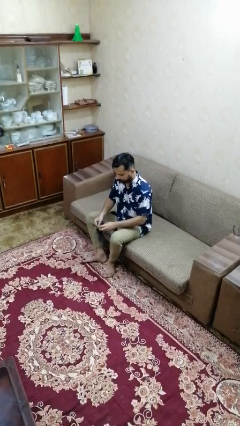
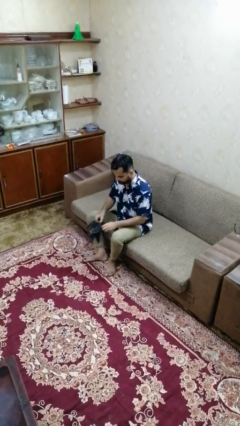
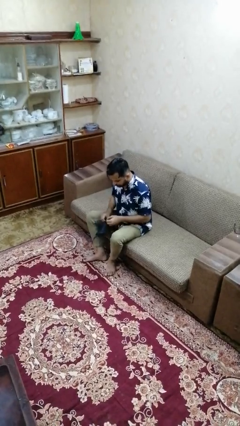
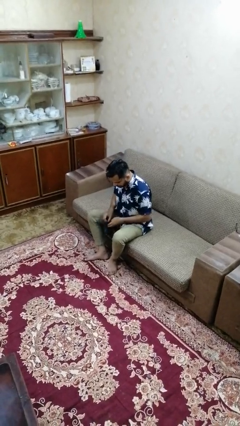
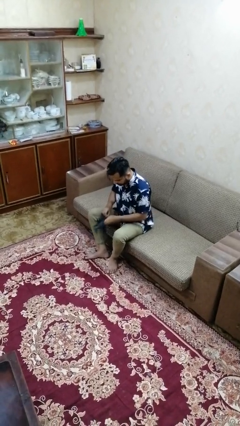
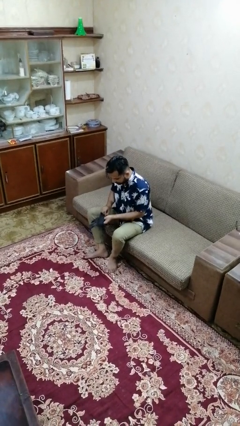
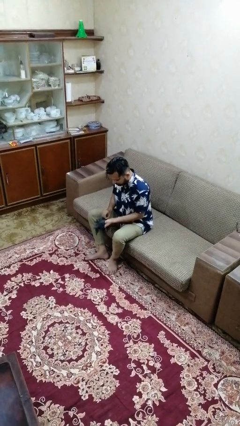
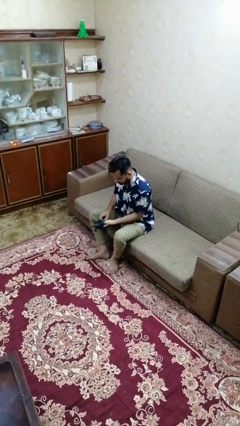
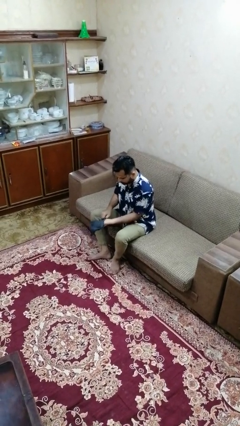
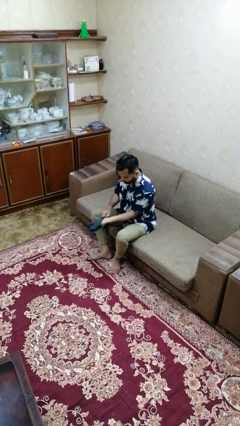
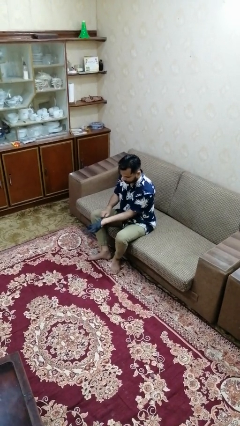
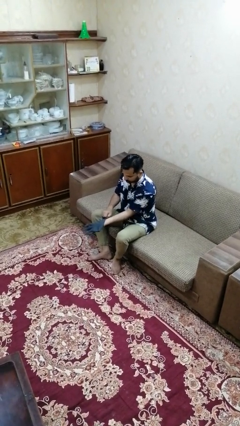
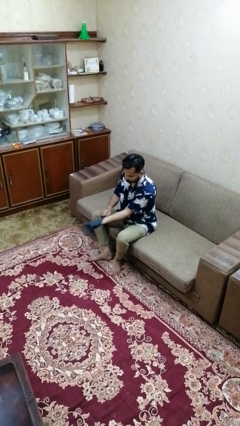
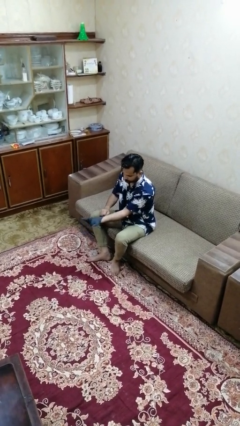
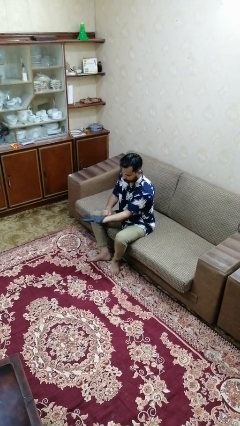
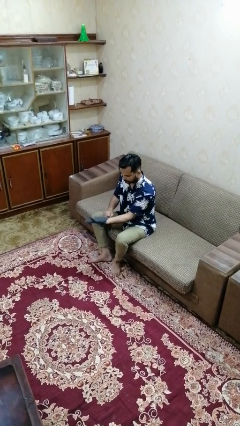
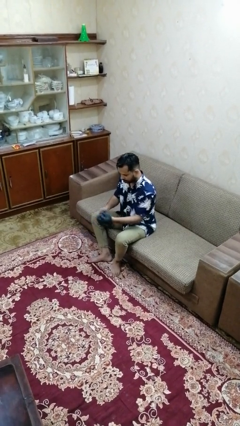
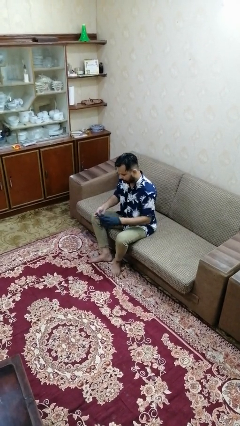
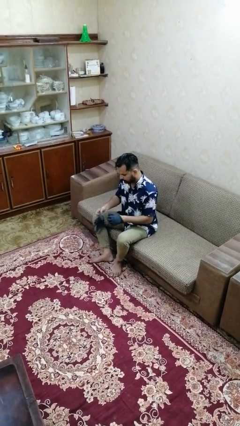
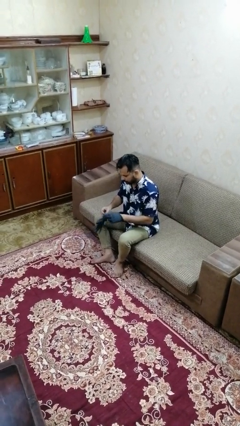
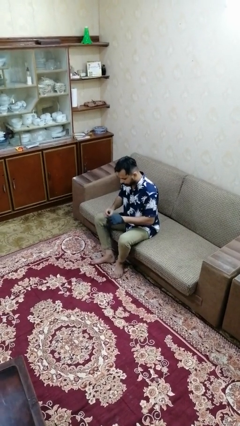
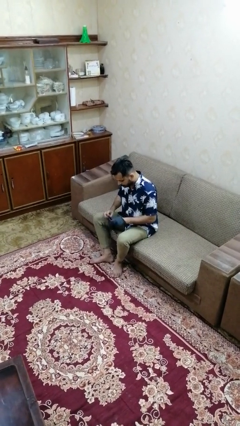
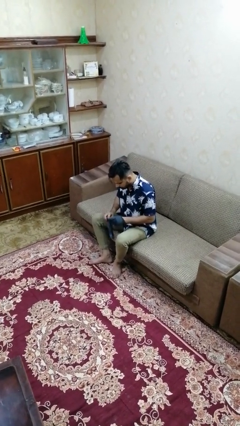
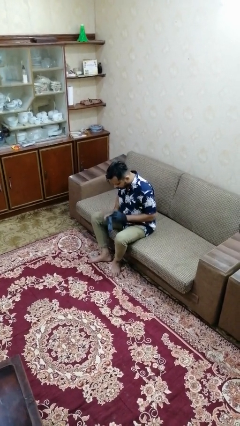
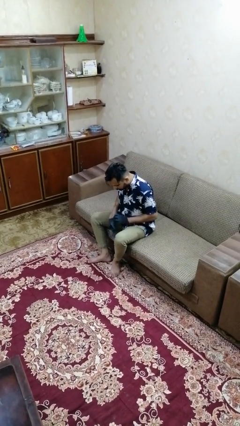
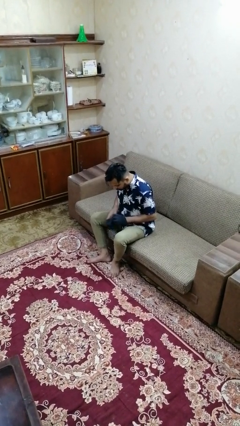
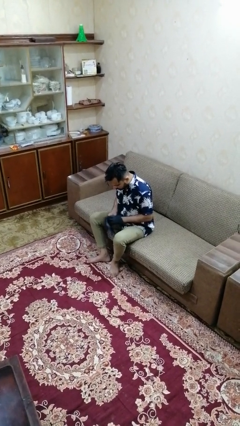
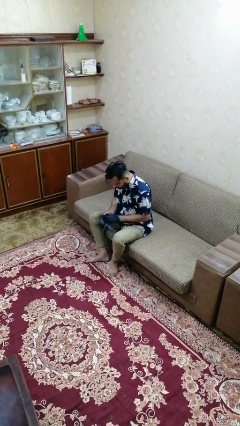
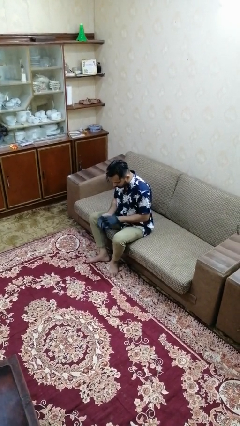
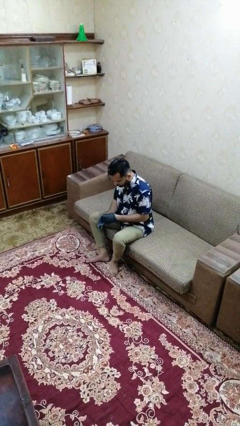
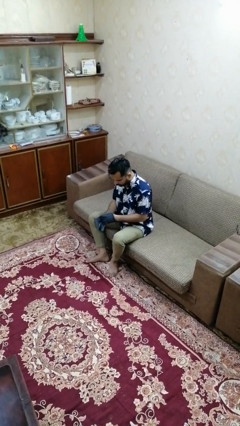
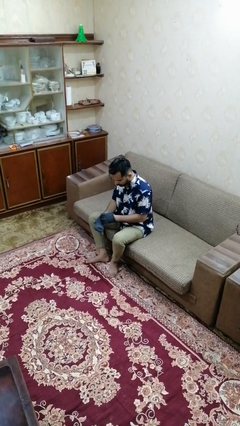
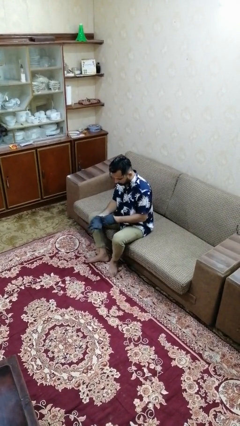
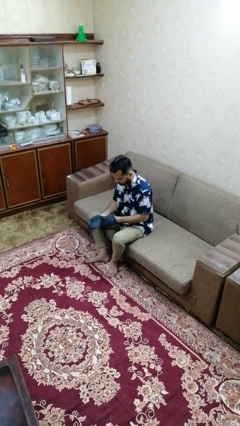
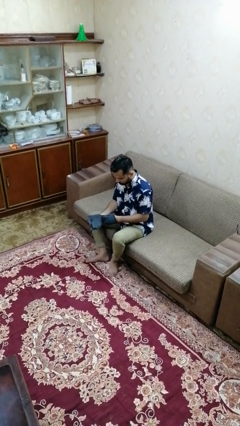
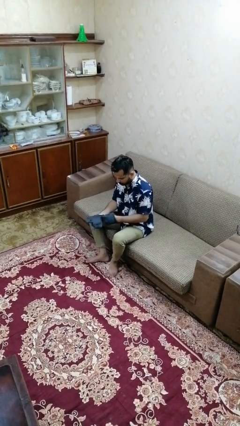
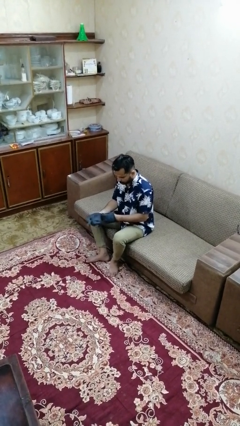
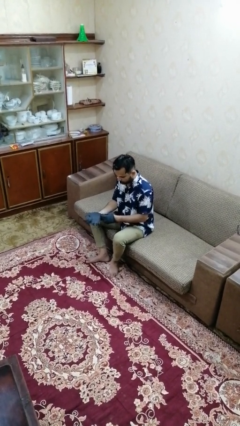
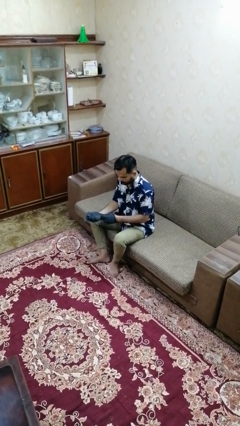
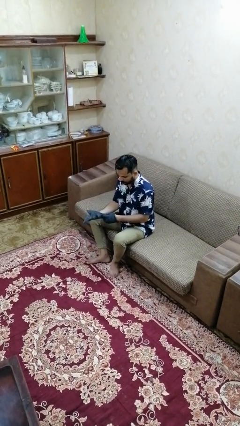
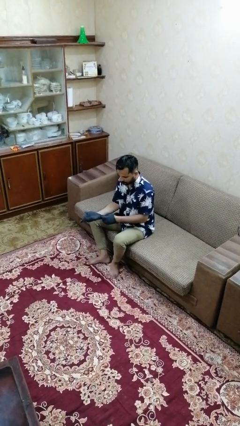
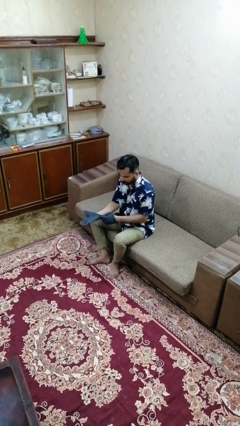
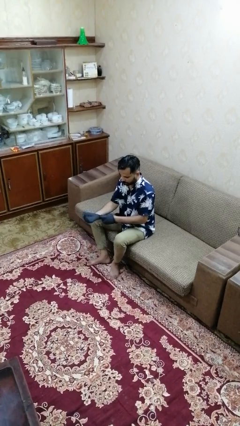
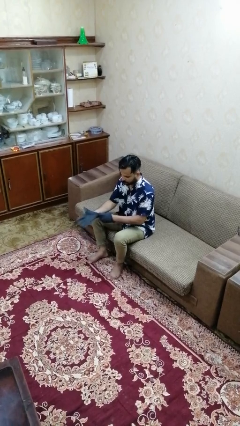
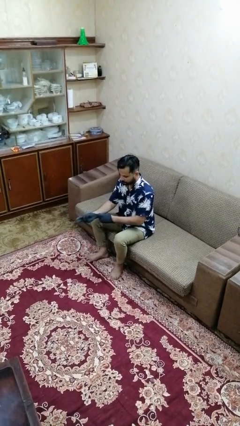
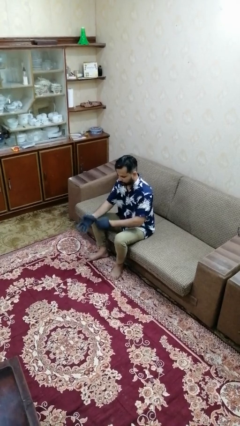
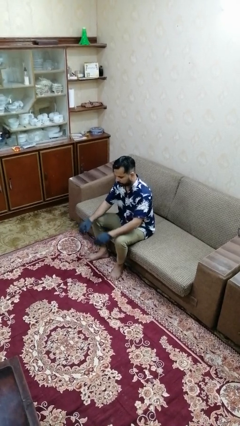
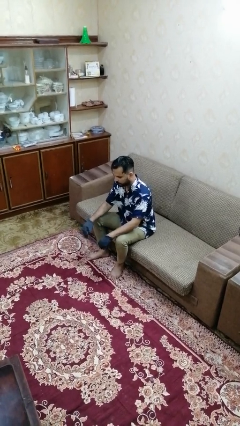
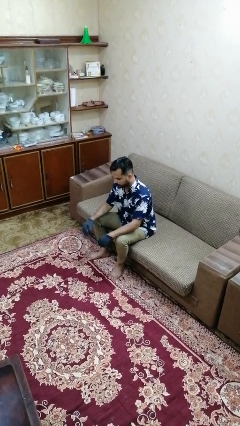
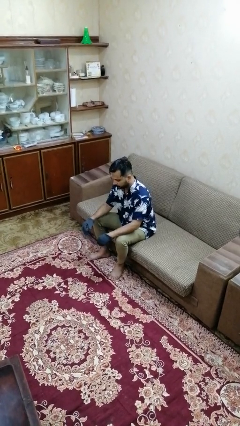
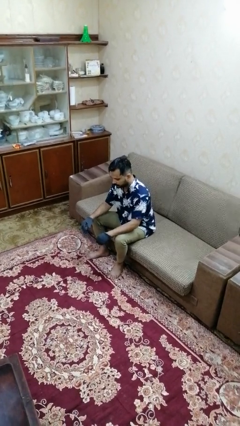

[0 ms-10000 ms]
person puts on gloves

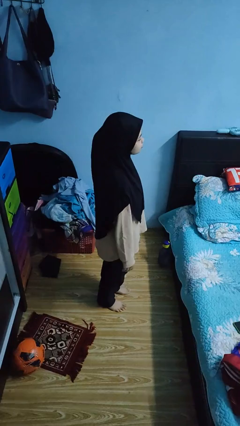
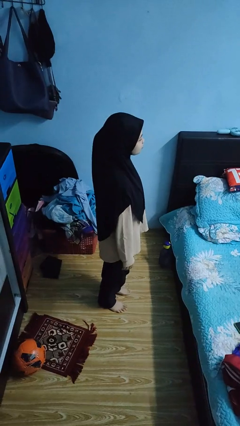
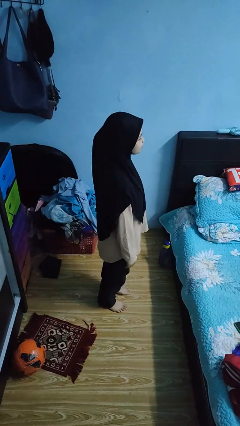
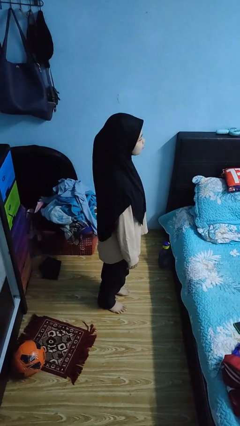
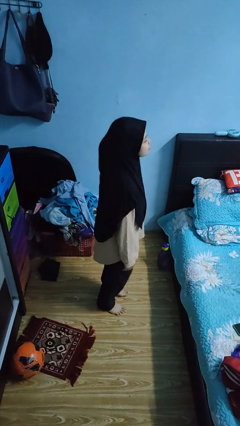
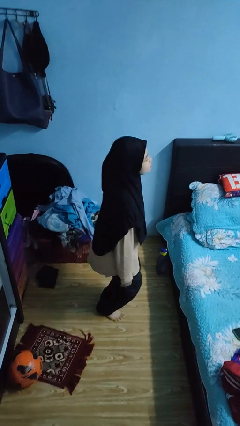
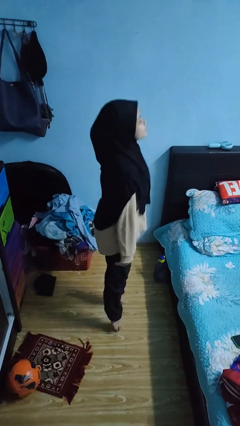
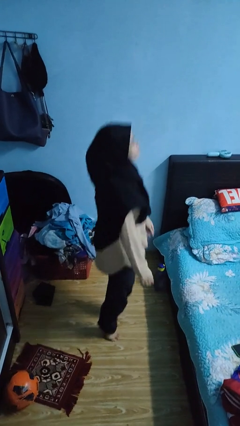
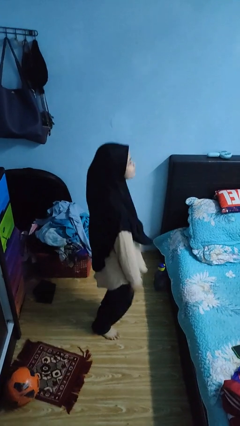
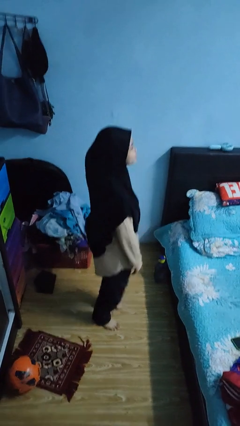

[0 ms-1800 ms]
person jumps

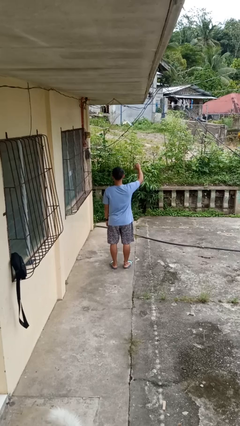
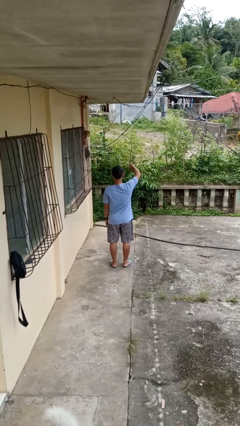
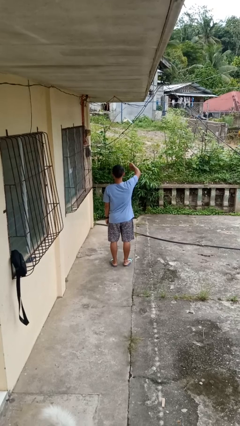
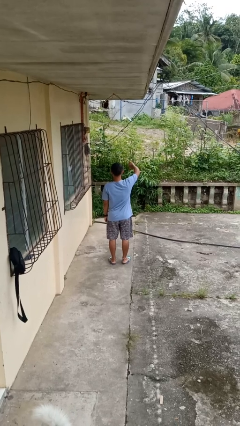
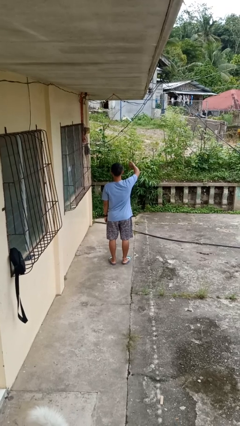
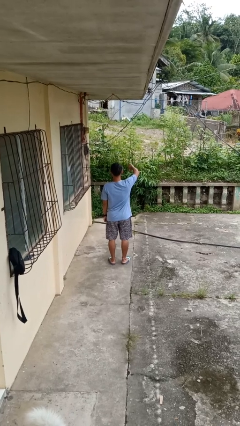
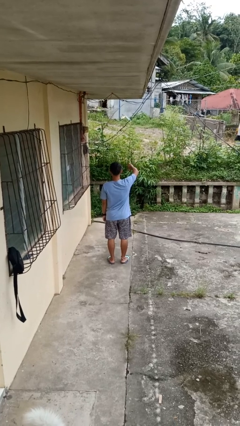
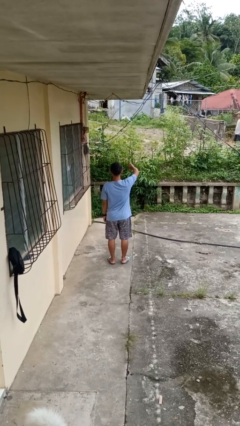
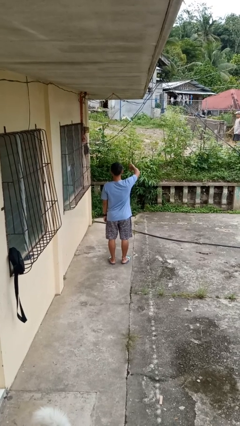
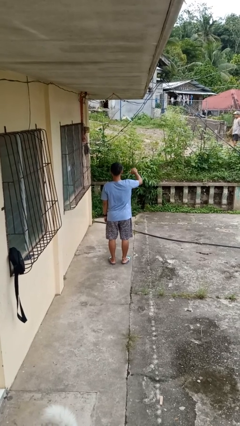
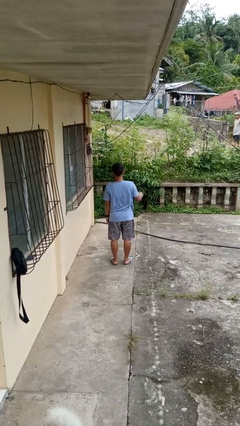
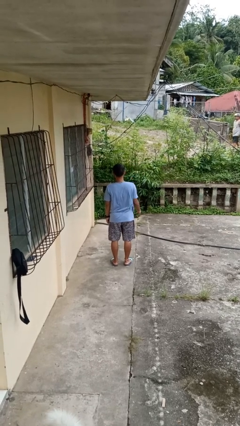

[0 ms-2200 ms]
person gestures thumbs down

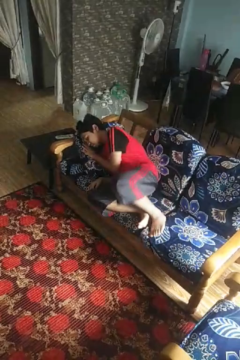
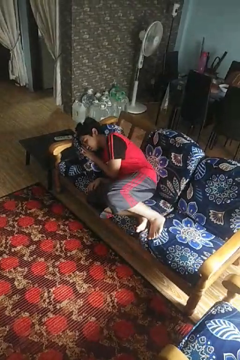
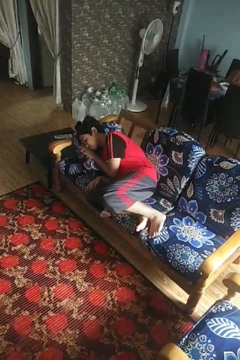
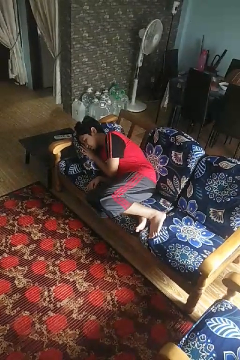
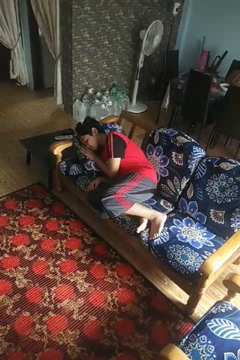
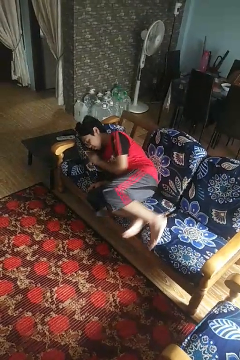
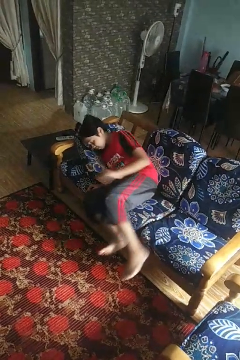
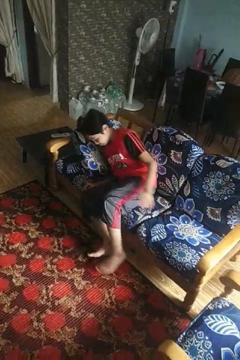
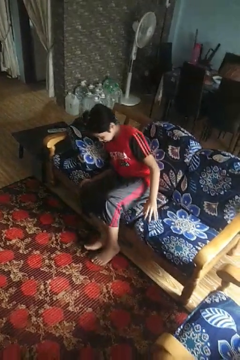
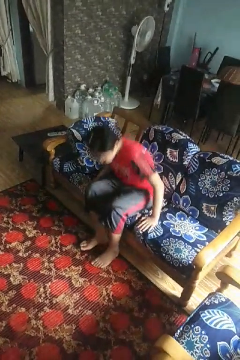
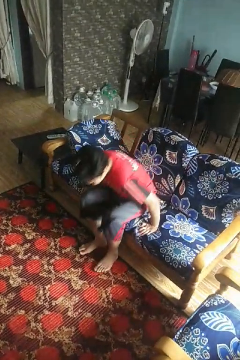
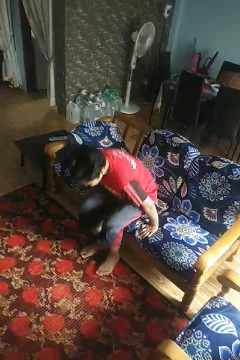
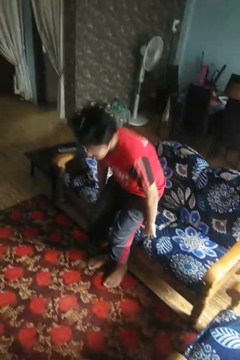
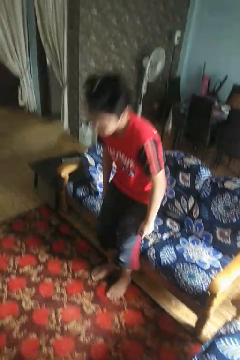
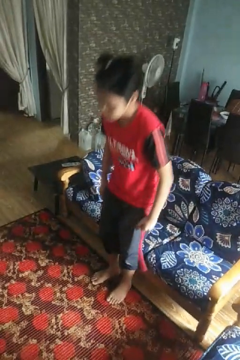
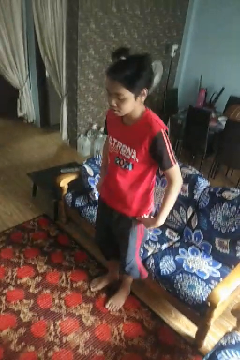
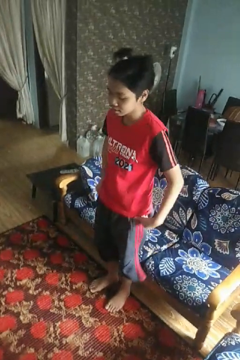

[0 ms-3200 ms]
person stands up

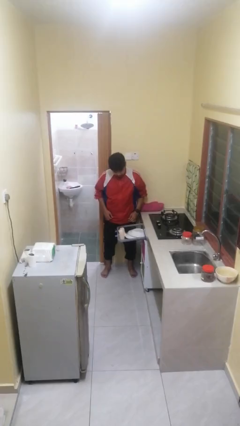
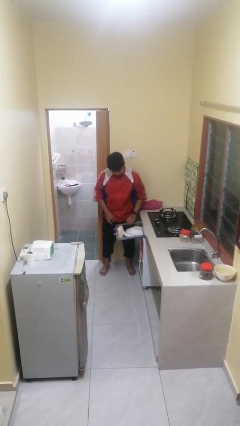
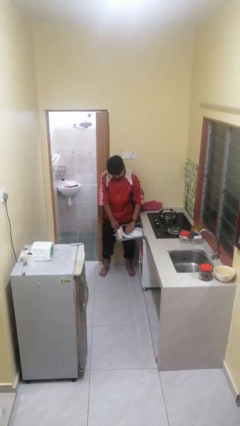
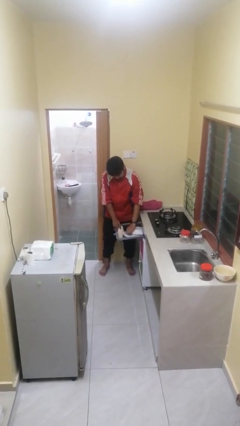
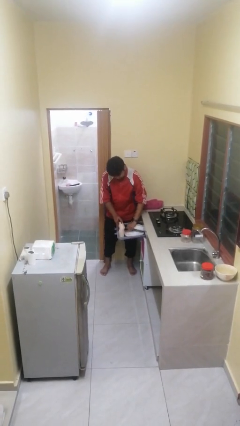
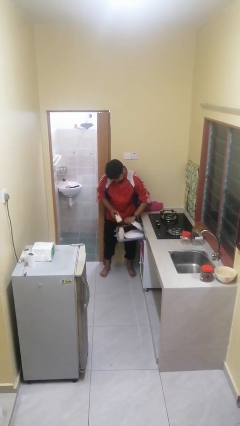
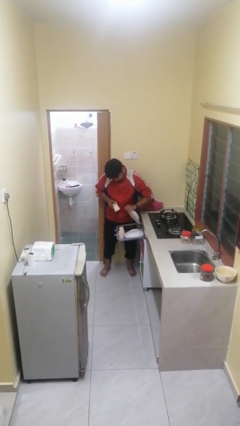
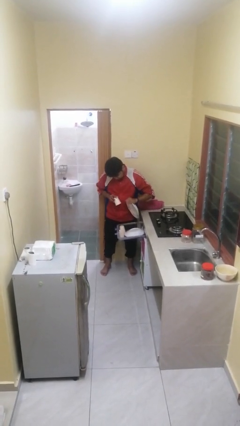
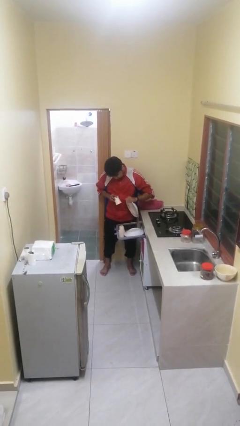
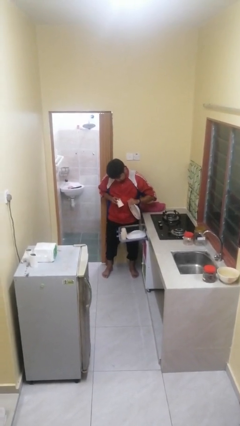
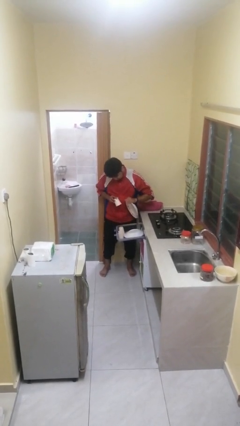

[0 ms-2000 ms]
person takes object from kitchen drawer
